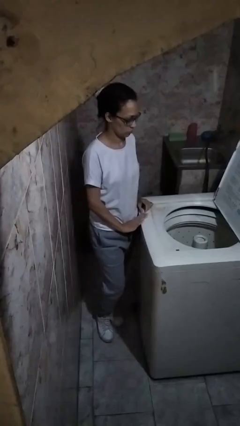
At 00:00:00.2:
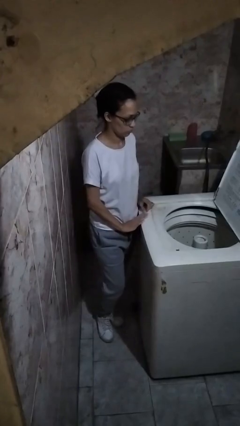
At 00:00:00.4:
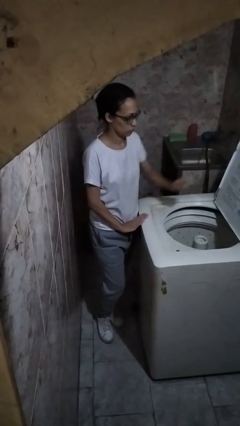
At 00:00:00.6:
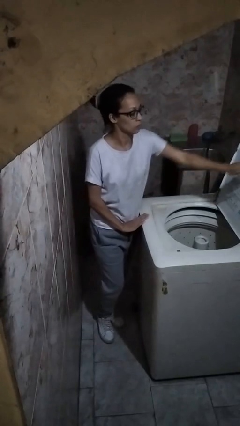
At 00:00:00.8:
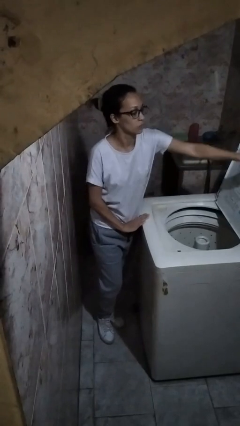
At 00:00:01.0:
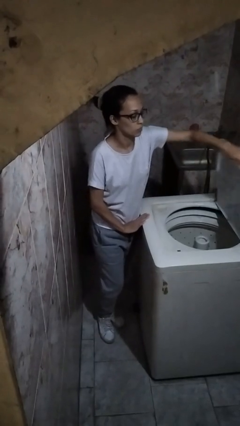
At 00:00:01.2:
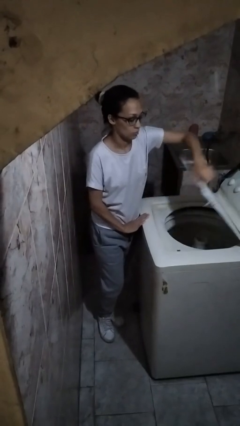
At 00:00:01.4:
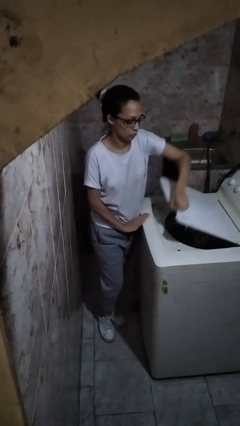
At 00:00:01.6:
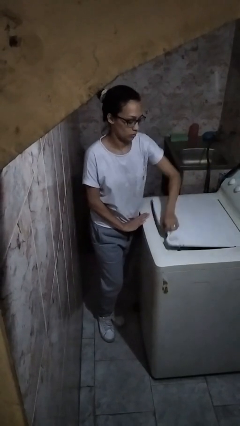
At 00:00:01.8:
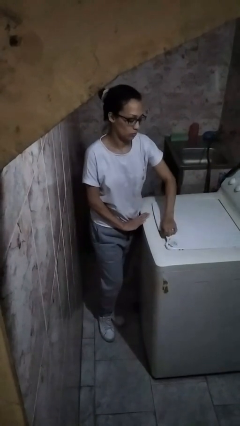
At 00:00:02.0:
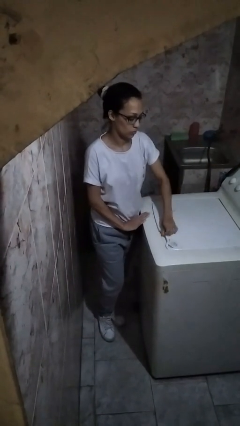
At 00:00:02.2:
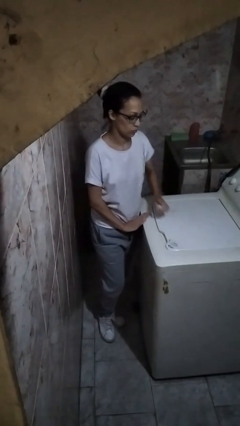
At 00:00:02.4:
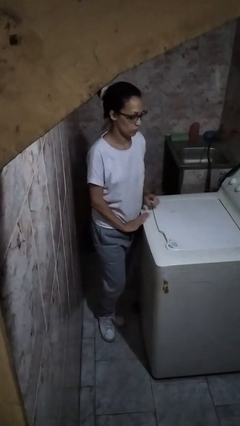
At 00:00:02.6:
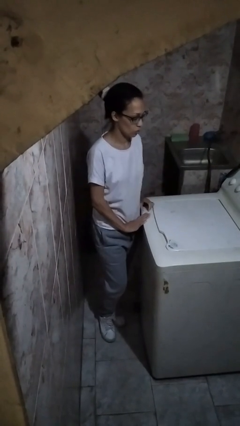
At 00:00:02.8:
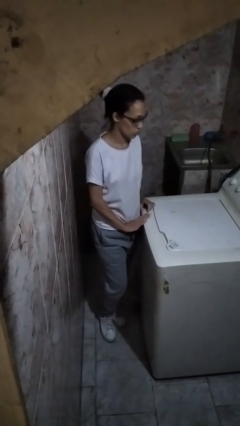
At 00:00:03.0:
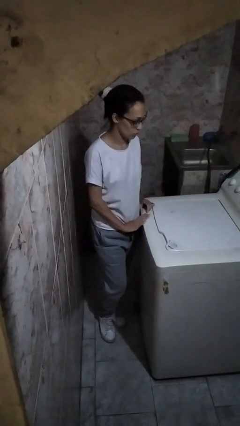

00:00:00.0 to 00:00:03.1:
person closes clothes washer

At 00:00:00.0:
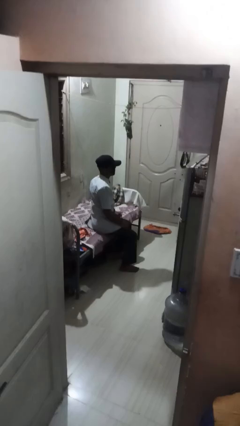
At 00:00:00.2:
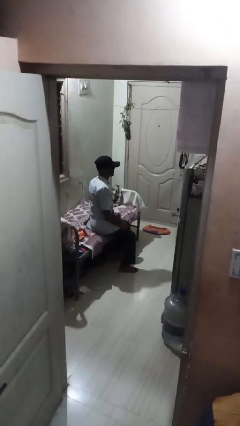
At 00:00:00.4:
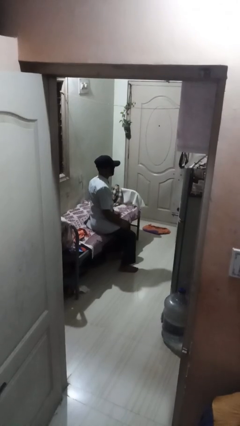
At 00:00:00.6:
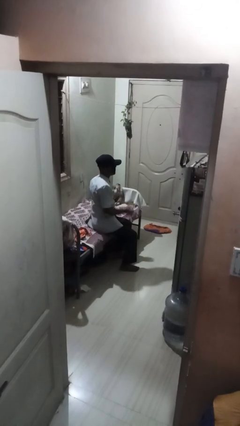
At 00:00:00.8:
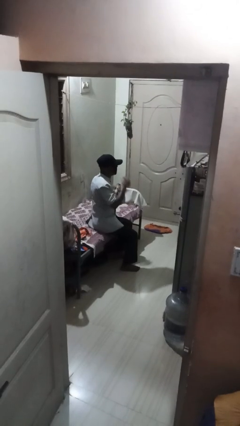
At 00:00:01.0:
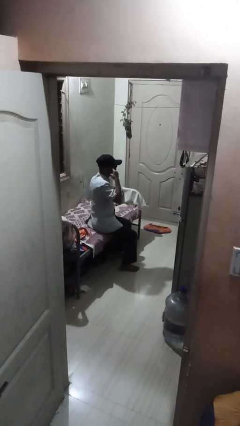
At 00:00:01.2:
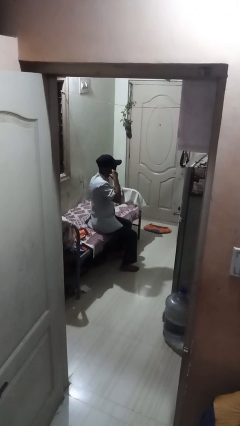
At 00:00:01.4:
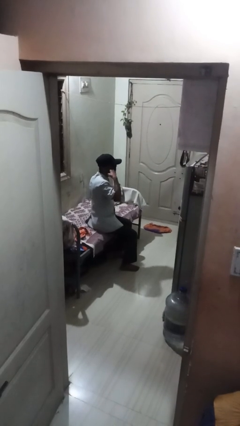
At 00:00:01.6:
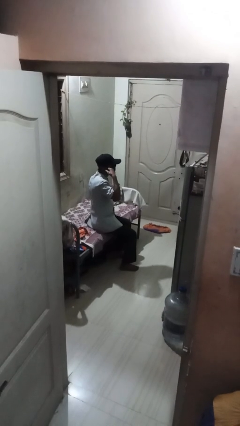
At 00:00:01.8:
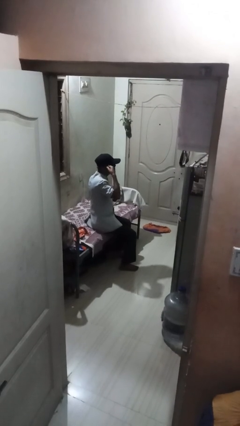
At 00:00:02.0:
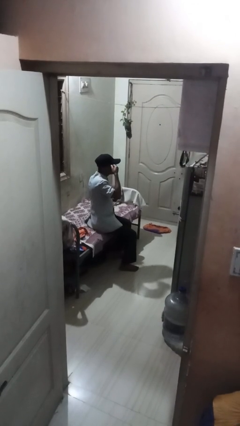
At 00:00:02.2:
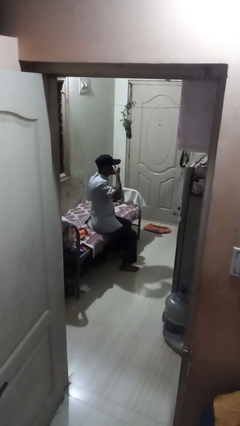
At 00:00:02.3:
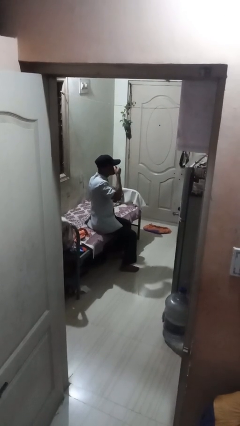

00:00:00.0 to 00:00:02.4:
person takes off facemask

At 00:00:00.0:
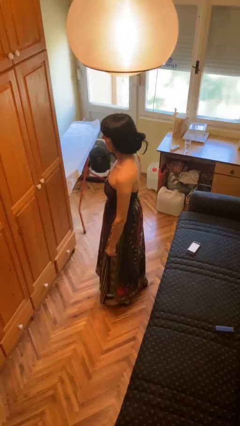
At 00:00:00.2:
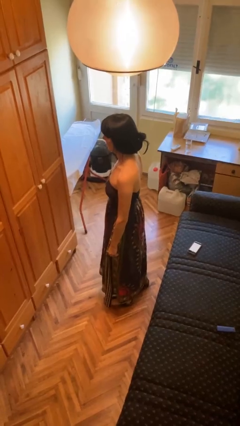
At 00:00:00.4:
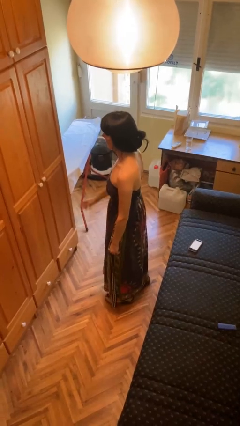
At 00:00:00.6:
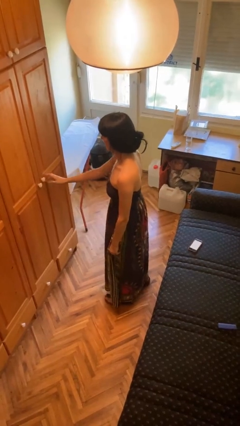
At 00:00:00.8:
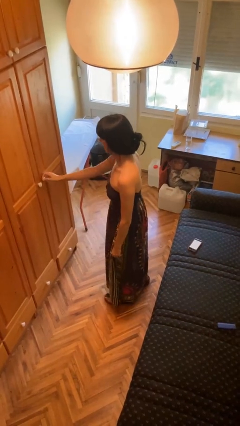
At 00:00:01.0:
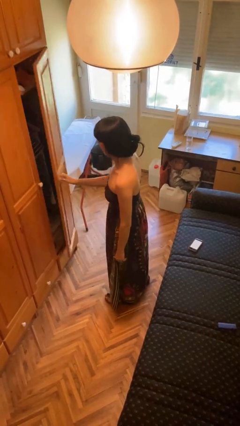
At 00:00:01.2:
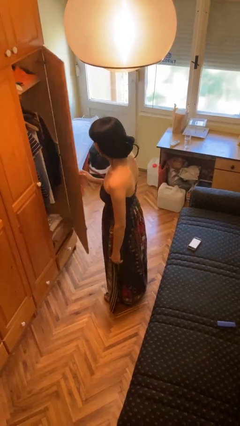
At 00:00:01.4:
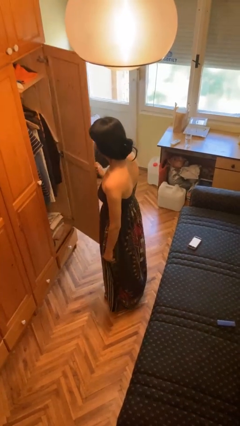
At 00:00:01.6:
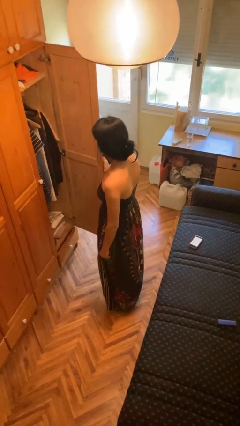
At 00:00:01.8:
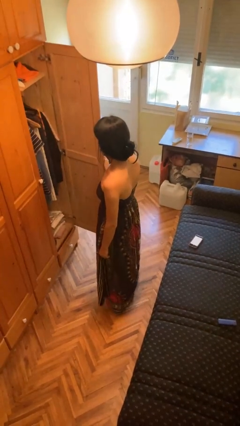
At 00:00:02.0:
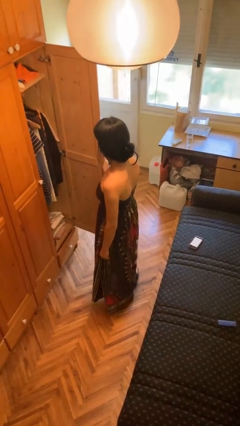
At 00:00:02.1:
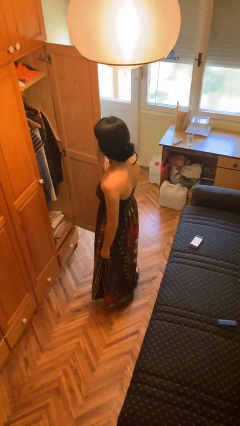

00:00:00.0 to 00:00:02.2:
person opens closet door

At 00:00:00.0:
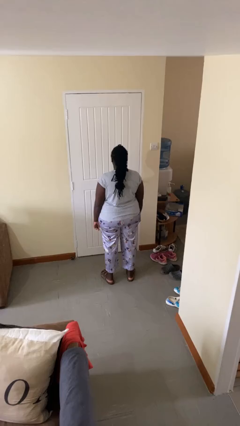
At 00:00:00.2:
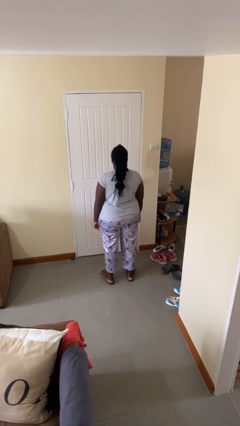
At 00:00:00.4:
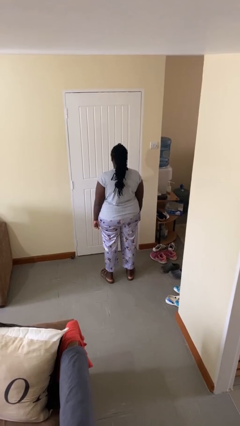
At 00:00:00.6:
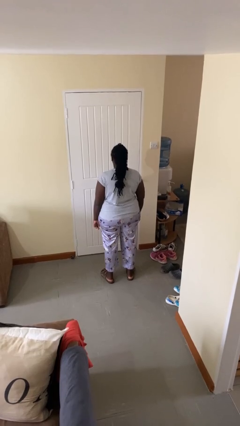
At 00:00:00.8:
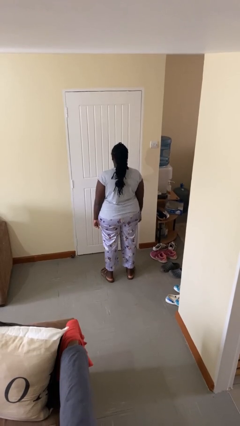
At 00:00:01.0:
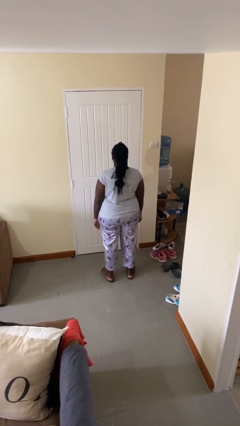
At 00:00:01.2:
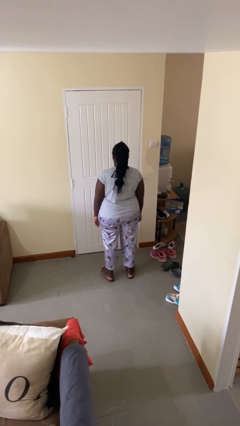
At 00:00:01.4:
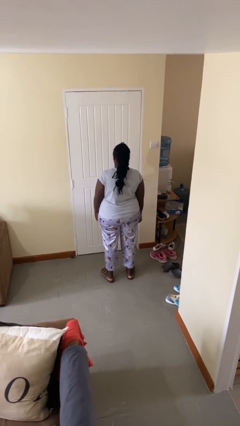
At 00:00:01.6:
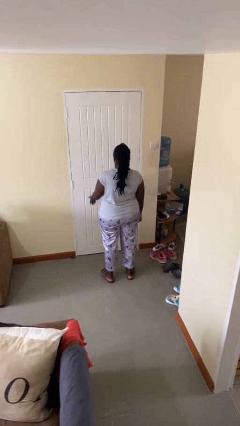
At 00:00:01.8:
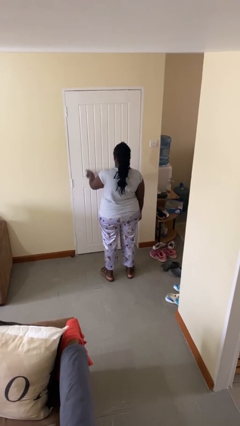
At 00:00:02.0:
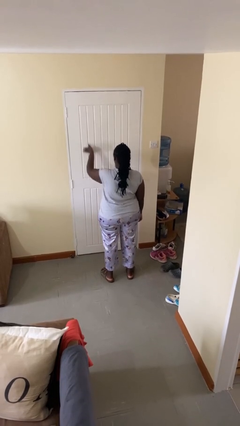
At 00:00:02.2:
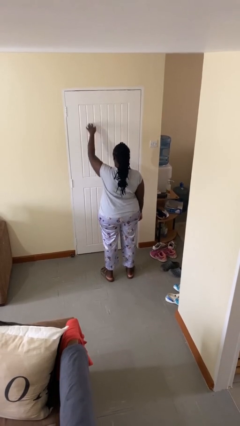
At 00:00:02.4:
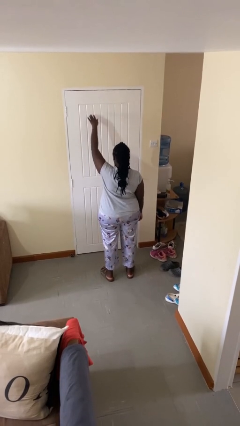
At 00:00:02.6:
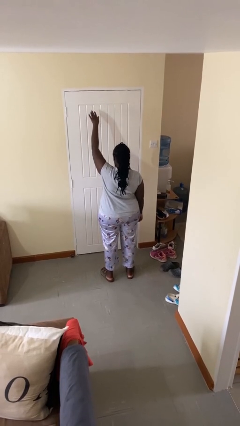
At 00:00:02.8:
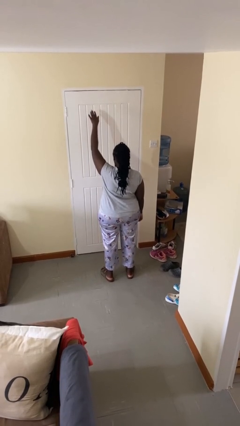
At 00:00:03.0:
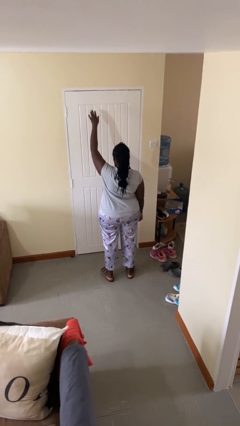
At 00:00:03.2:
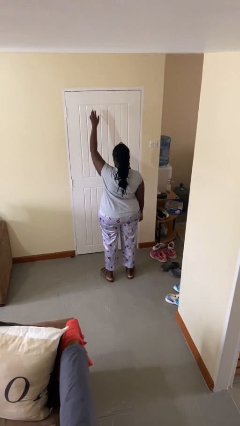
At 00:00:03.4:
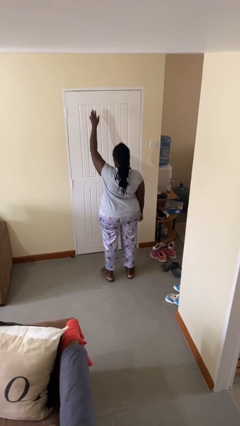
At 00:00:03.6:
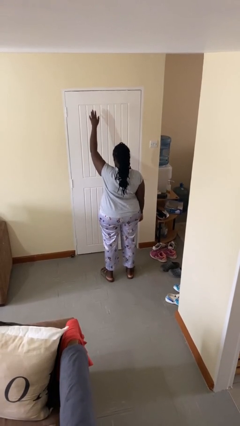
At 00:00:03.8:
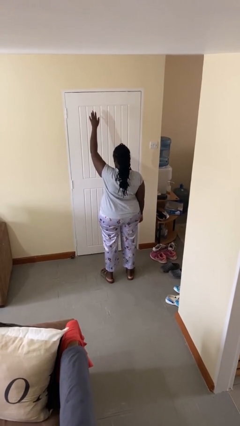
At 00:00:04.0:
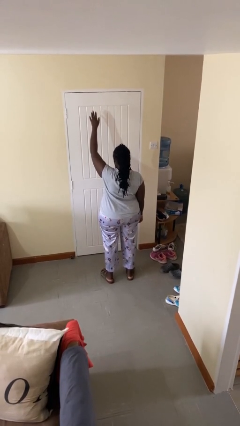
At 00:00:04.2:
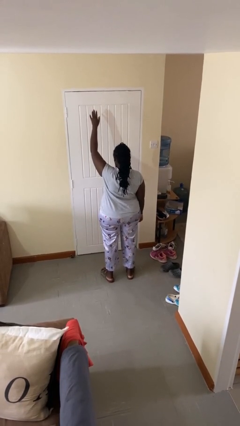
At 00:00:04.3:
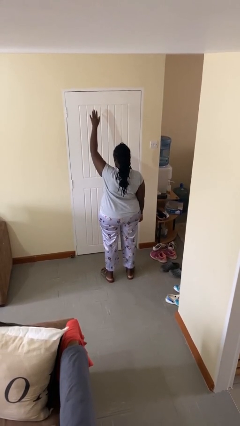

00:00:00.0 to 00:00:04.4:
person gestures swipe up

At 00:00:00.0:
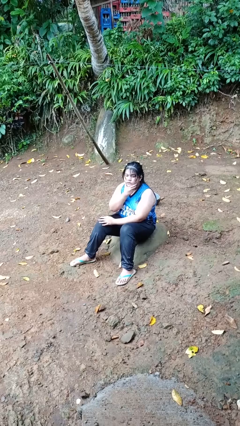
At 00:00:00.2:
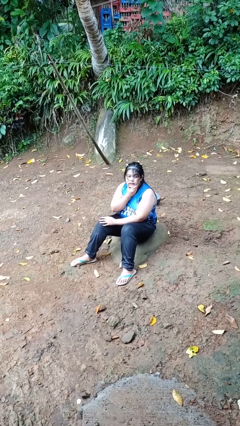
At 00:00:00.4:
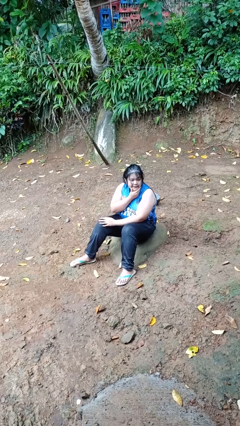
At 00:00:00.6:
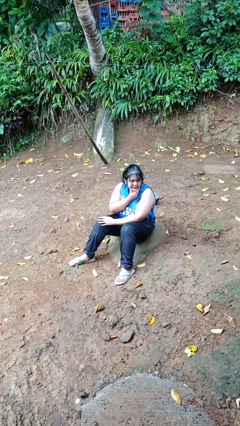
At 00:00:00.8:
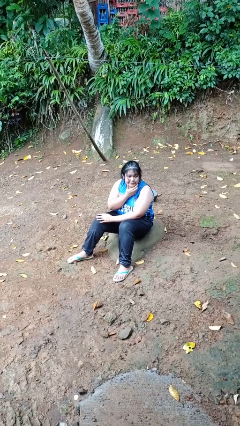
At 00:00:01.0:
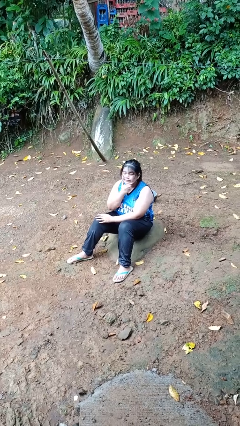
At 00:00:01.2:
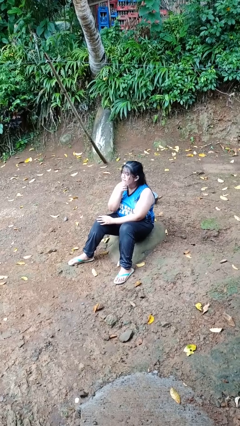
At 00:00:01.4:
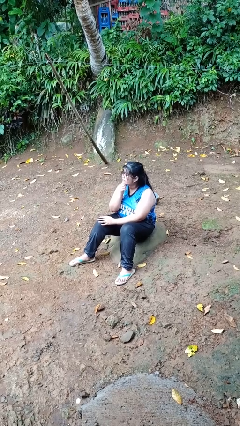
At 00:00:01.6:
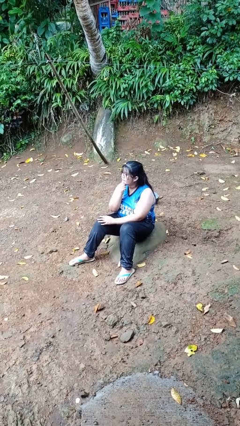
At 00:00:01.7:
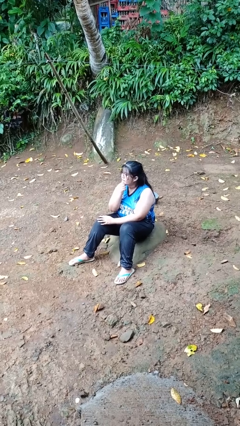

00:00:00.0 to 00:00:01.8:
person strokes chin

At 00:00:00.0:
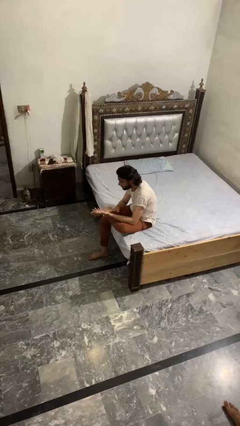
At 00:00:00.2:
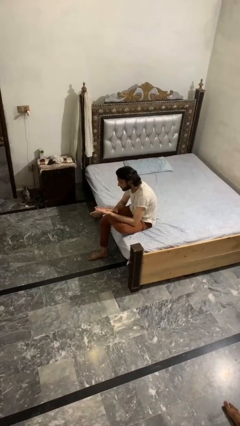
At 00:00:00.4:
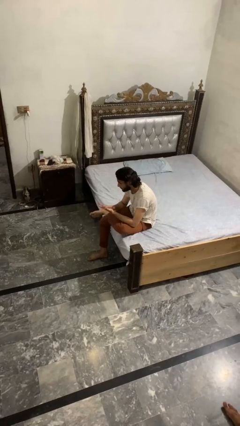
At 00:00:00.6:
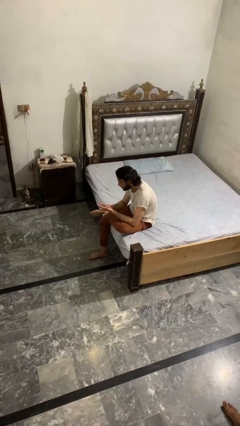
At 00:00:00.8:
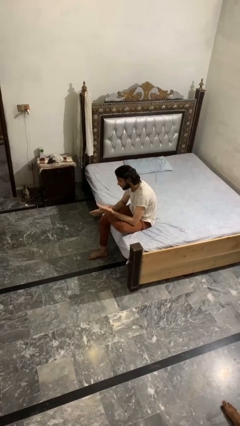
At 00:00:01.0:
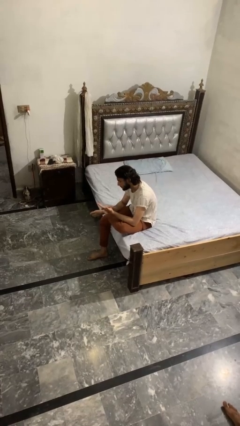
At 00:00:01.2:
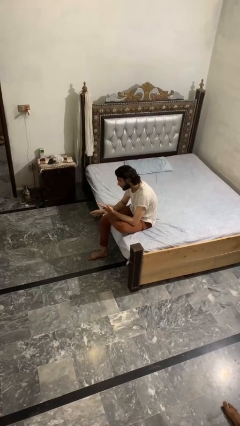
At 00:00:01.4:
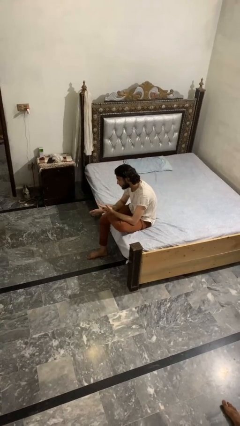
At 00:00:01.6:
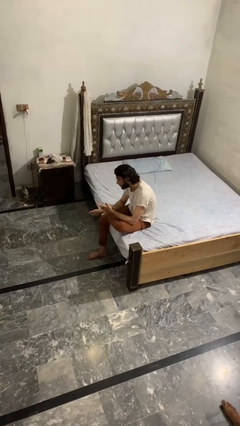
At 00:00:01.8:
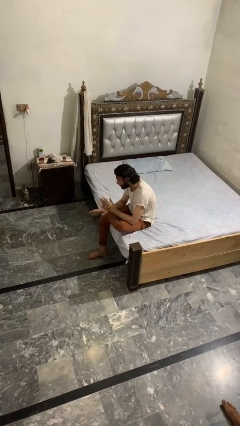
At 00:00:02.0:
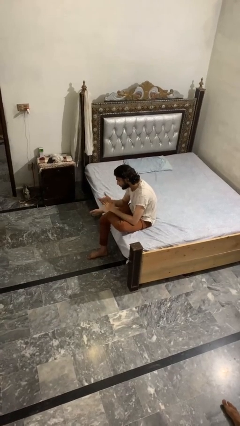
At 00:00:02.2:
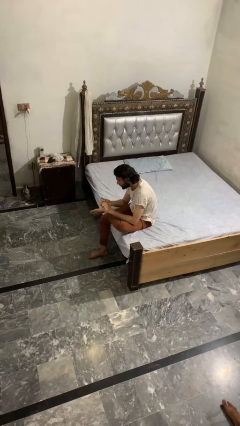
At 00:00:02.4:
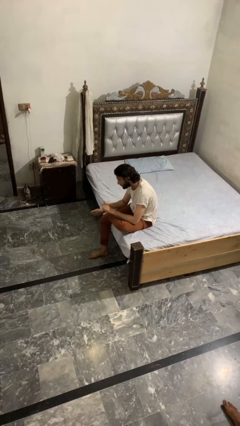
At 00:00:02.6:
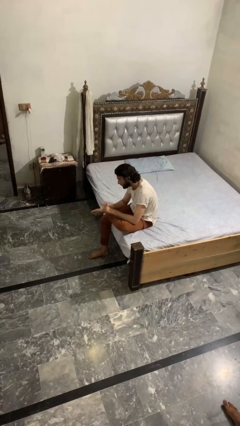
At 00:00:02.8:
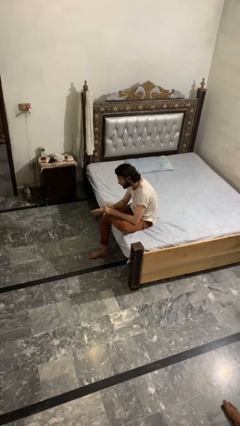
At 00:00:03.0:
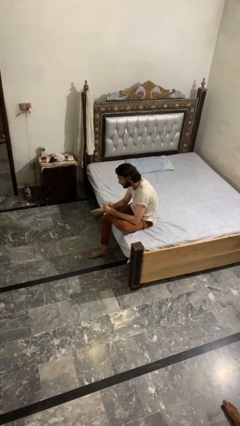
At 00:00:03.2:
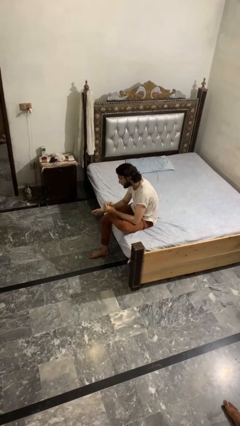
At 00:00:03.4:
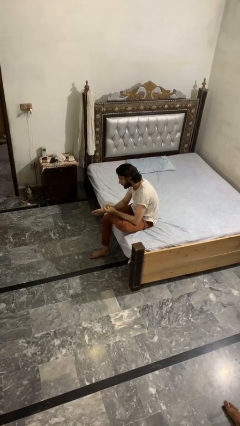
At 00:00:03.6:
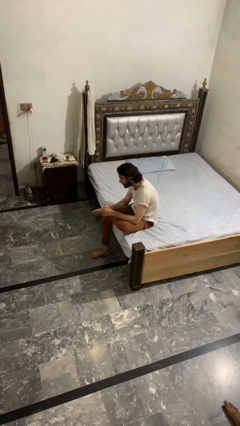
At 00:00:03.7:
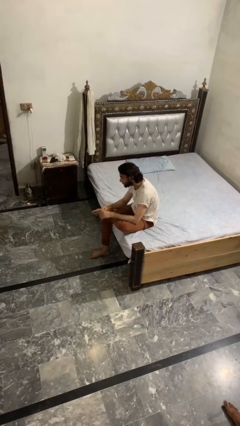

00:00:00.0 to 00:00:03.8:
person looks at hands in lap
